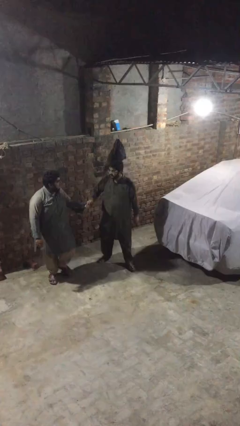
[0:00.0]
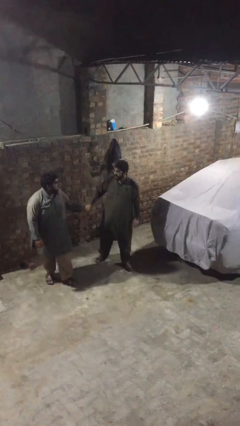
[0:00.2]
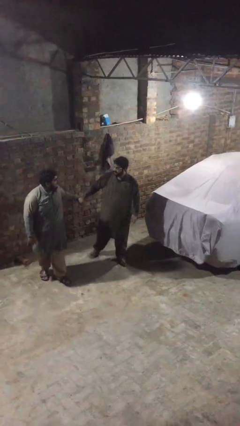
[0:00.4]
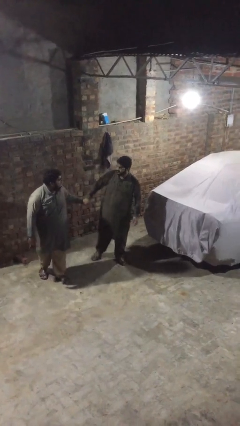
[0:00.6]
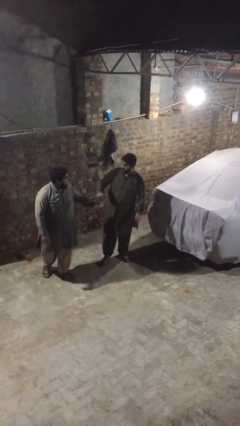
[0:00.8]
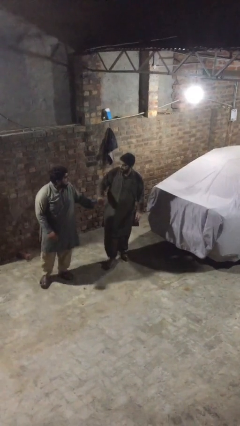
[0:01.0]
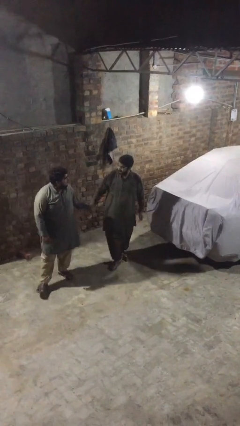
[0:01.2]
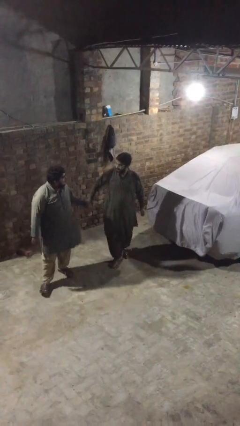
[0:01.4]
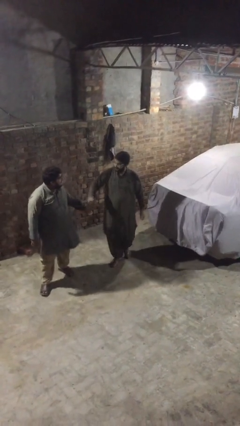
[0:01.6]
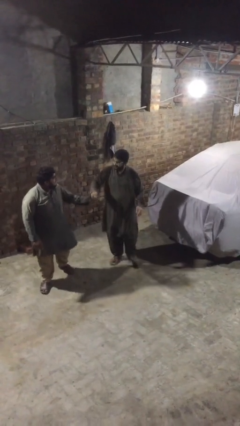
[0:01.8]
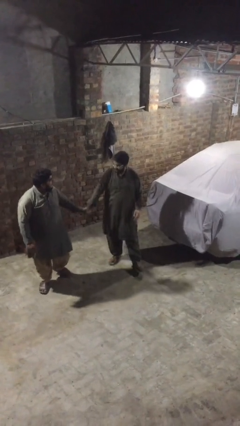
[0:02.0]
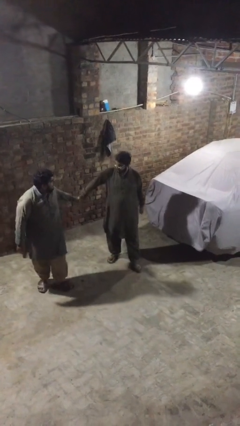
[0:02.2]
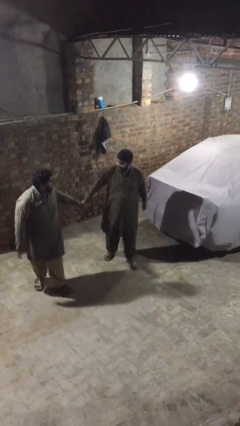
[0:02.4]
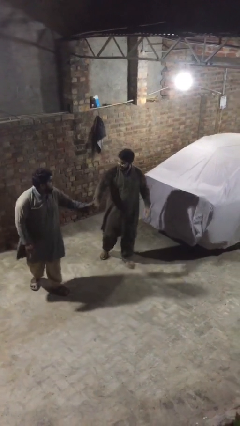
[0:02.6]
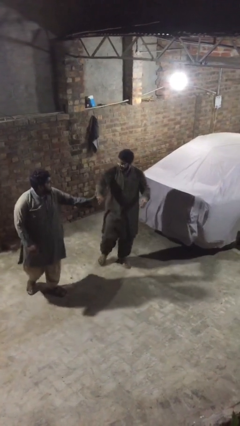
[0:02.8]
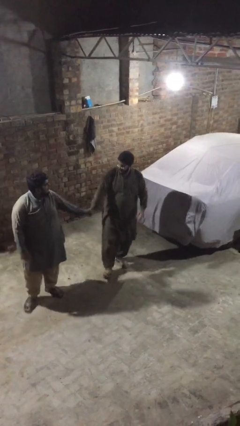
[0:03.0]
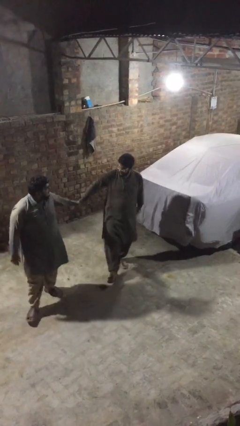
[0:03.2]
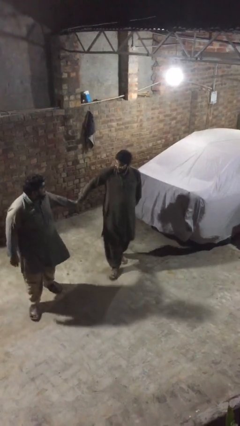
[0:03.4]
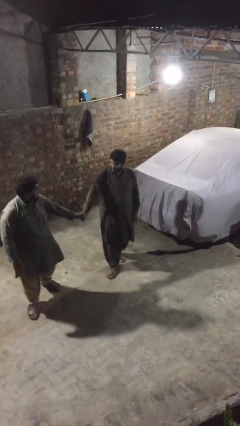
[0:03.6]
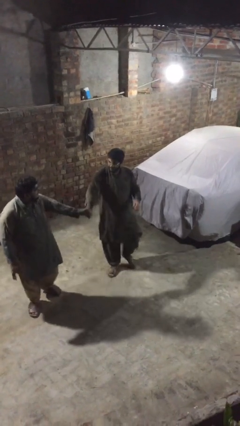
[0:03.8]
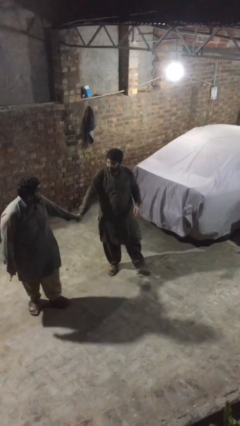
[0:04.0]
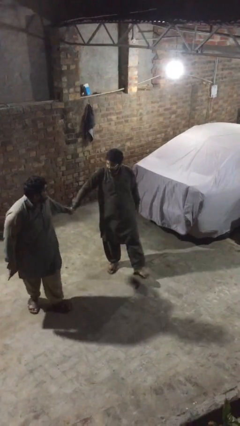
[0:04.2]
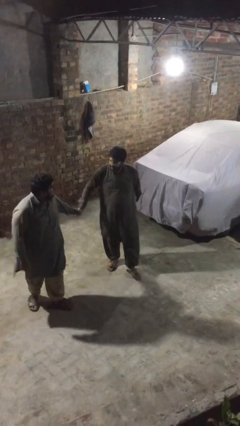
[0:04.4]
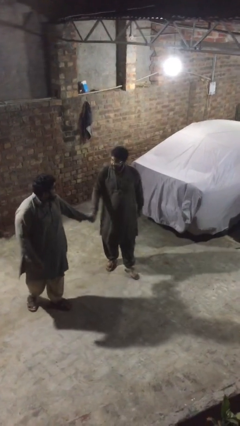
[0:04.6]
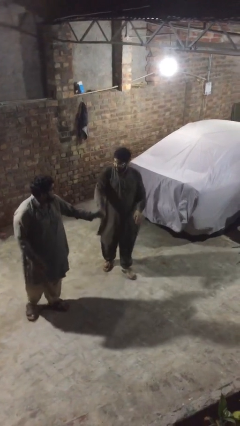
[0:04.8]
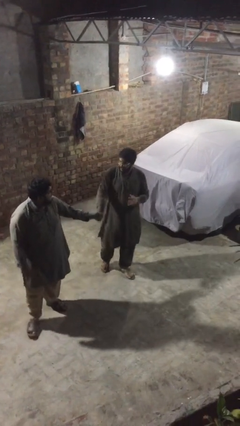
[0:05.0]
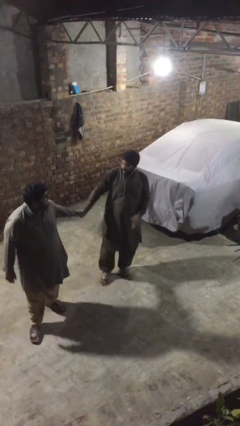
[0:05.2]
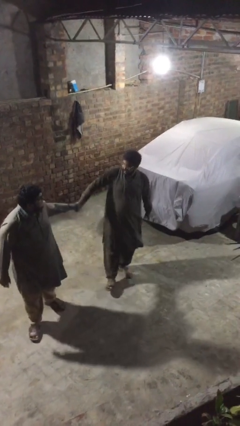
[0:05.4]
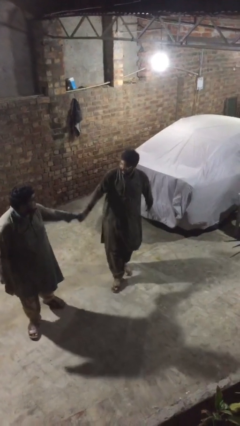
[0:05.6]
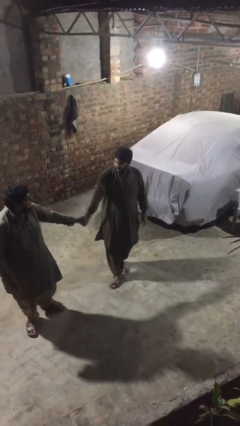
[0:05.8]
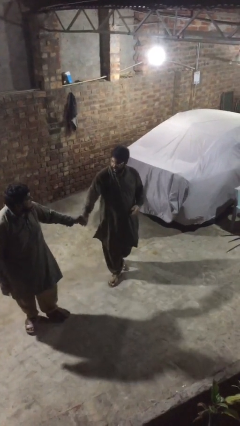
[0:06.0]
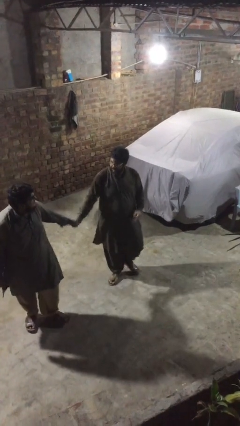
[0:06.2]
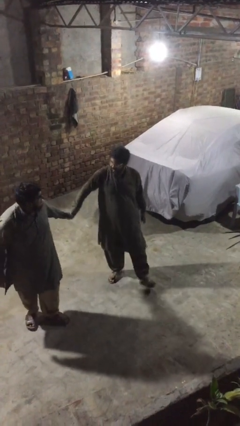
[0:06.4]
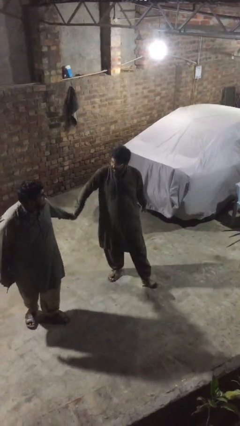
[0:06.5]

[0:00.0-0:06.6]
person holds hand

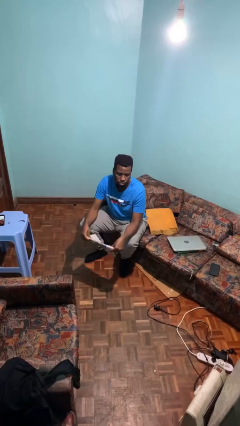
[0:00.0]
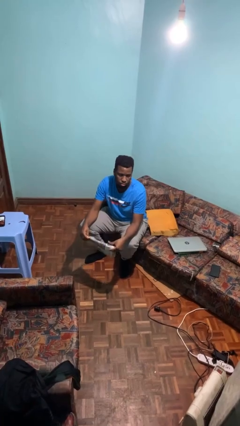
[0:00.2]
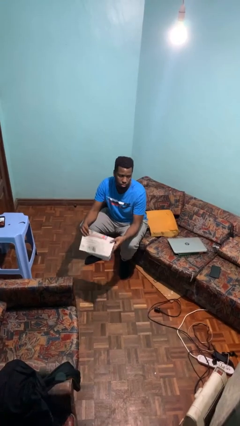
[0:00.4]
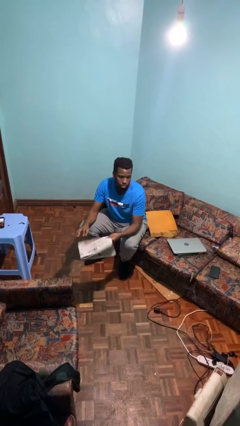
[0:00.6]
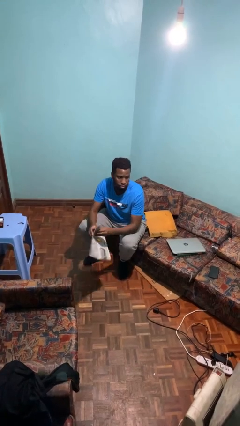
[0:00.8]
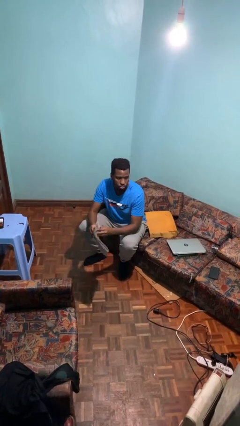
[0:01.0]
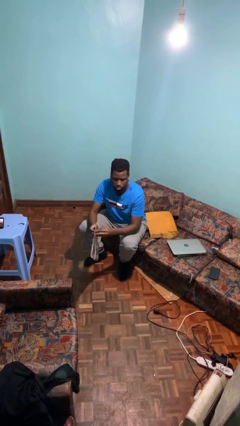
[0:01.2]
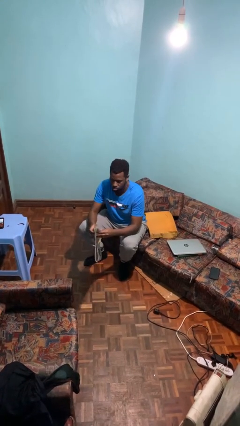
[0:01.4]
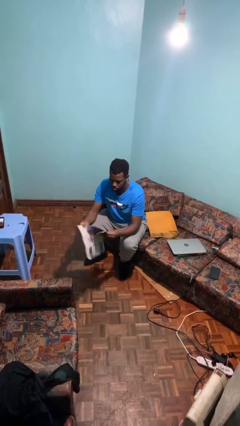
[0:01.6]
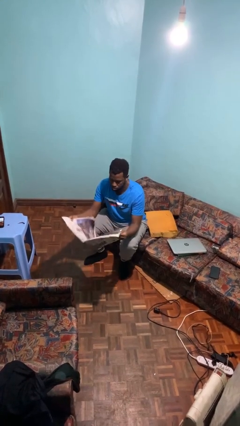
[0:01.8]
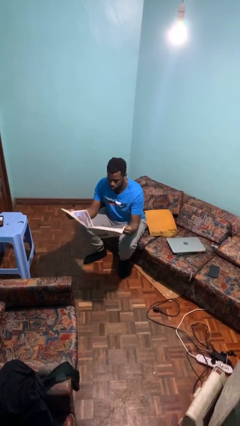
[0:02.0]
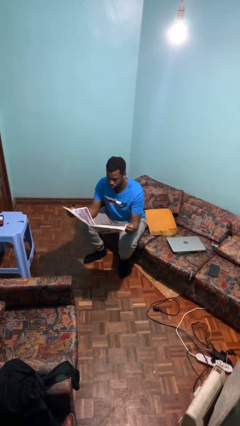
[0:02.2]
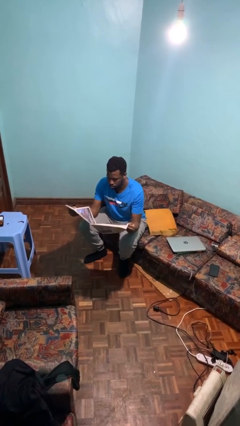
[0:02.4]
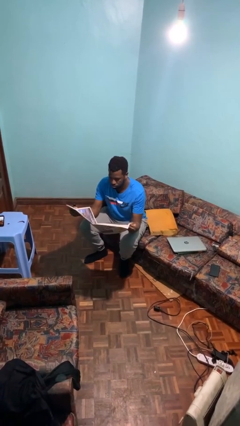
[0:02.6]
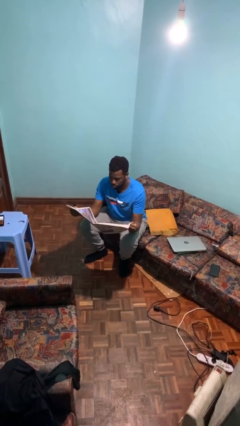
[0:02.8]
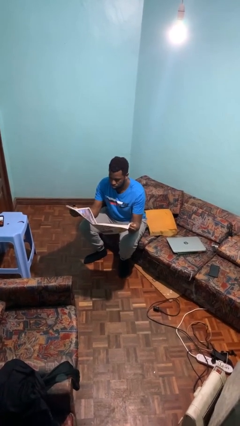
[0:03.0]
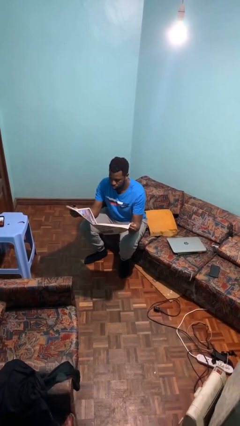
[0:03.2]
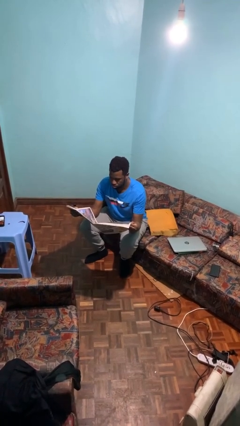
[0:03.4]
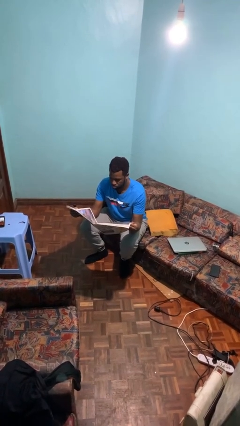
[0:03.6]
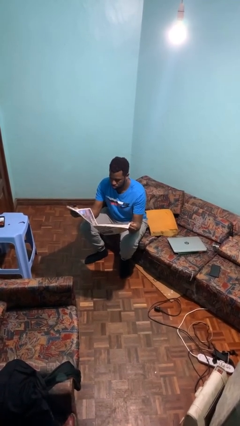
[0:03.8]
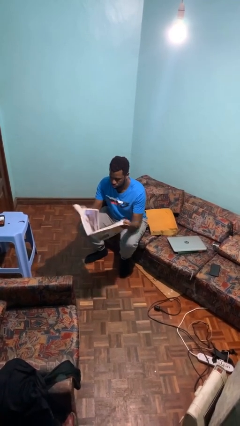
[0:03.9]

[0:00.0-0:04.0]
person reads newspaper

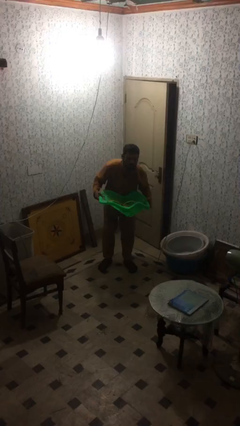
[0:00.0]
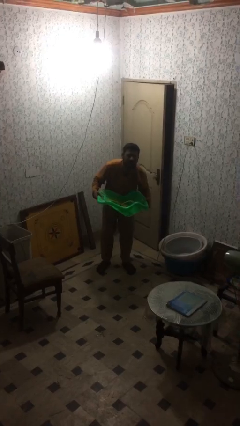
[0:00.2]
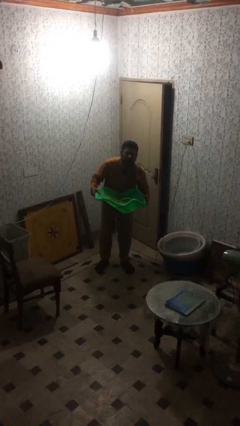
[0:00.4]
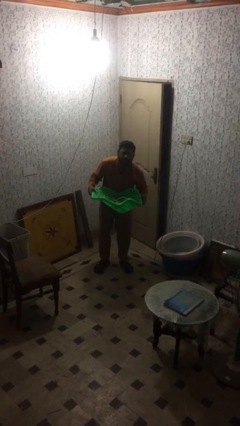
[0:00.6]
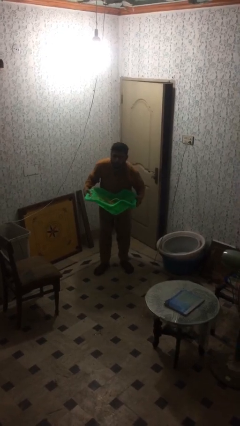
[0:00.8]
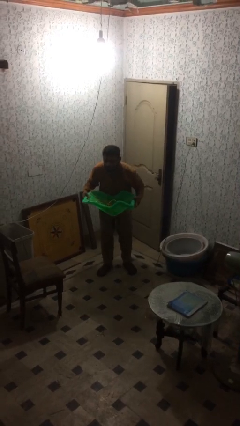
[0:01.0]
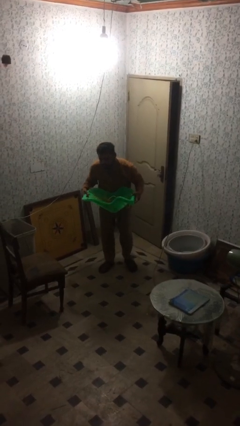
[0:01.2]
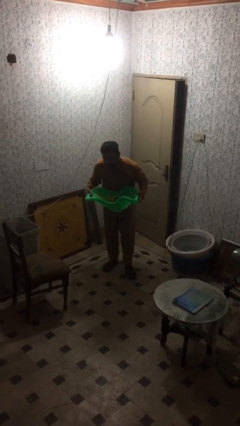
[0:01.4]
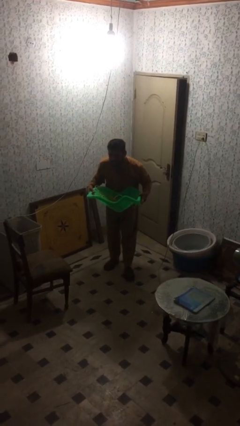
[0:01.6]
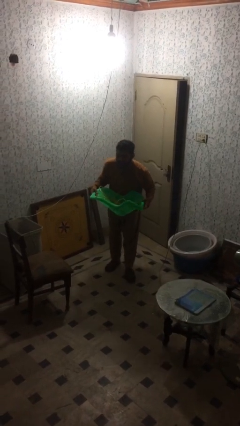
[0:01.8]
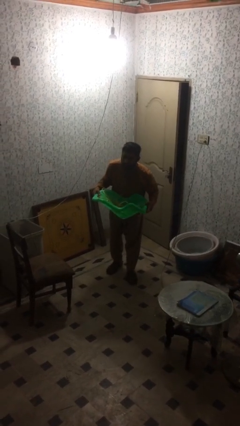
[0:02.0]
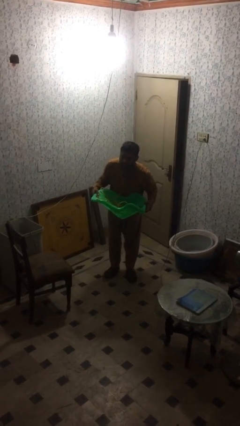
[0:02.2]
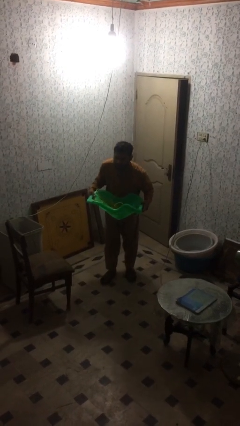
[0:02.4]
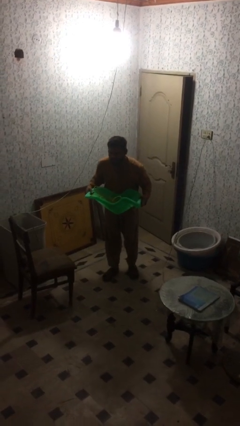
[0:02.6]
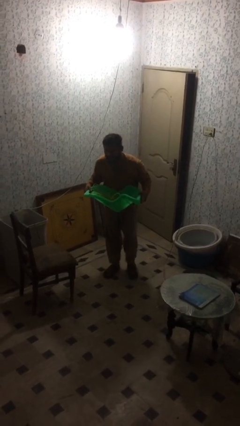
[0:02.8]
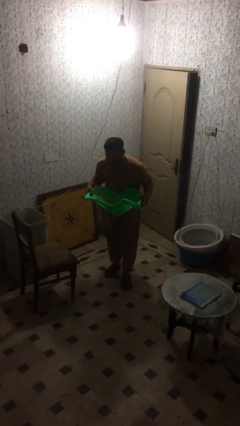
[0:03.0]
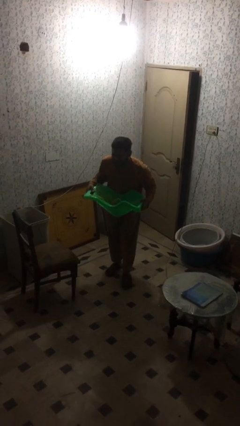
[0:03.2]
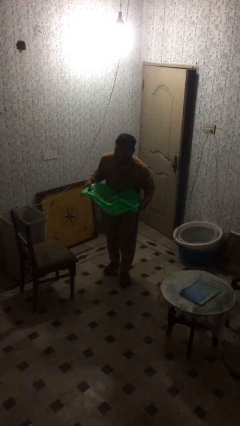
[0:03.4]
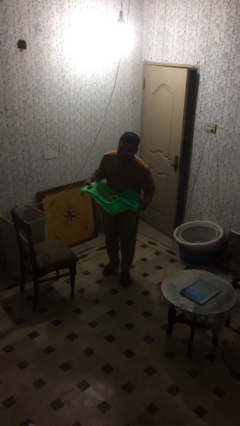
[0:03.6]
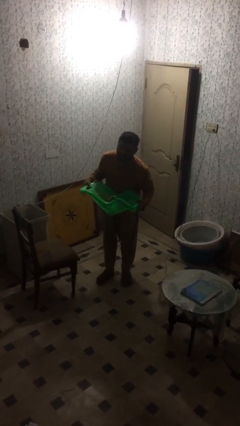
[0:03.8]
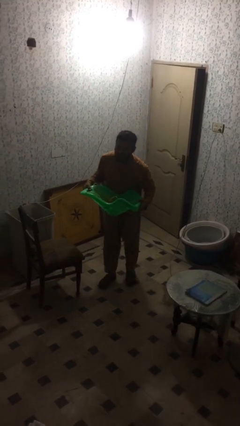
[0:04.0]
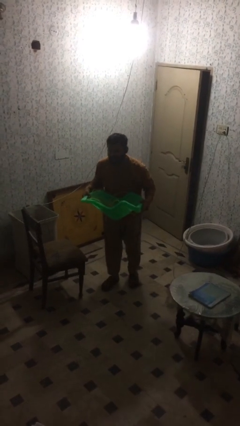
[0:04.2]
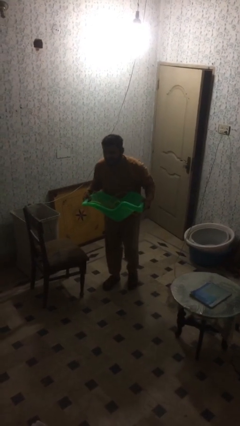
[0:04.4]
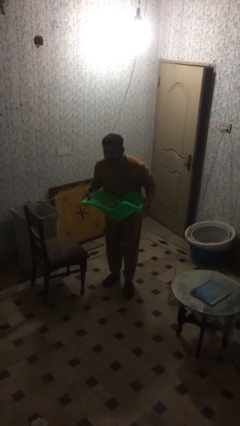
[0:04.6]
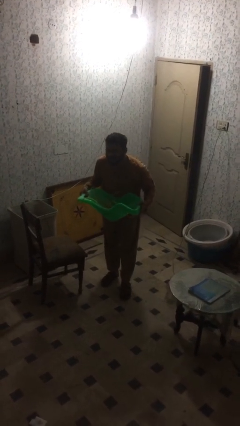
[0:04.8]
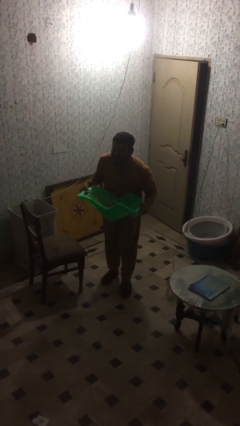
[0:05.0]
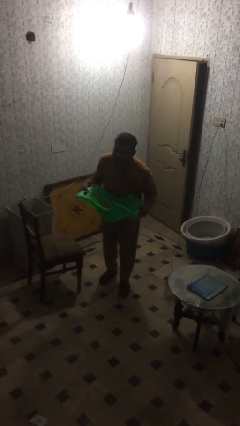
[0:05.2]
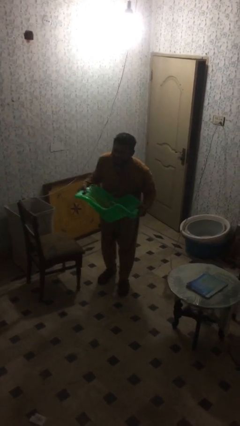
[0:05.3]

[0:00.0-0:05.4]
person carries heavy object

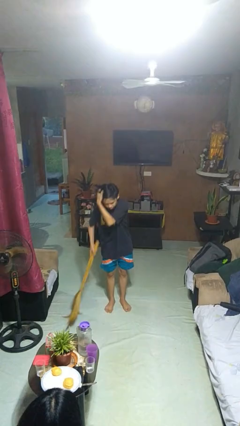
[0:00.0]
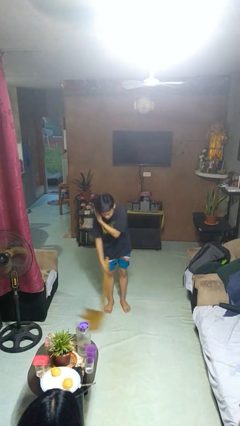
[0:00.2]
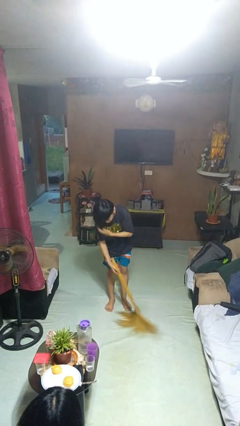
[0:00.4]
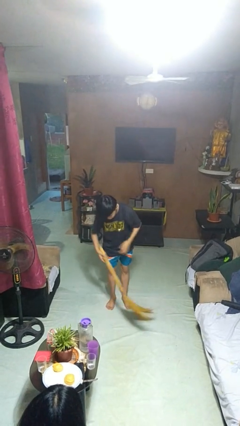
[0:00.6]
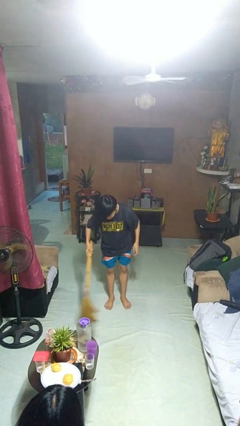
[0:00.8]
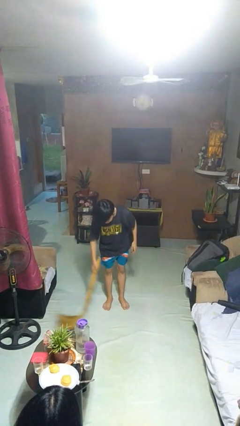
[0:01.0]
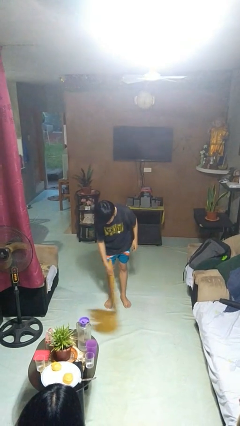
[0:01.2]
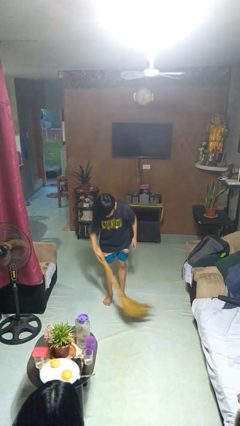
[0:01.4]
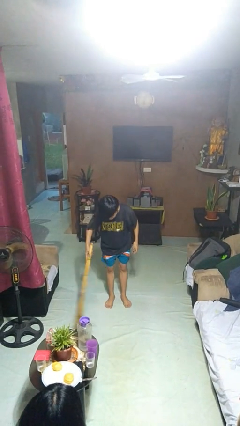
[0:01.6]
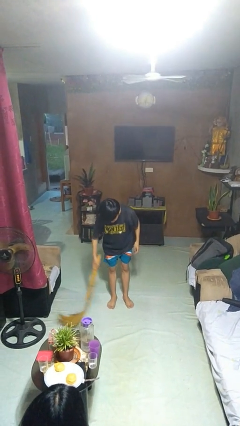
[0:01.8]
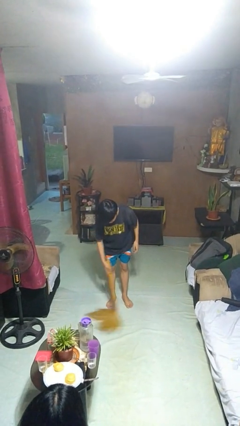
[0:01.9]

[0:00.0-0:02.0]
person sweeps floor
